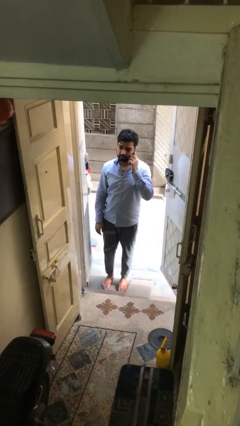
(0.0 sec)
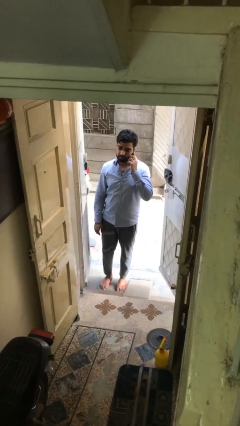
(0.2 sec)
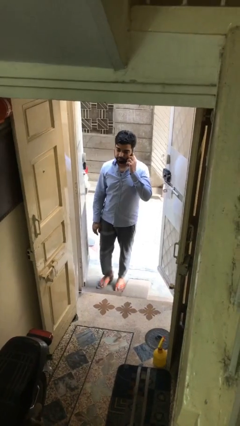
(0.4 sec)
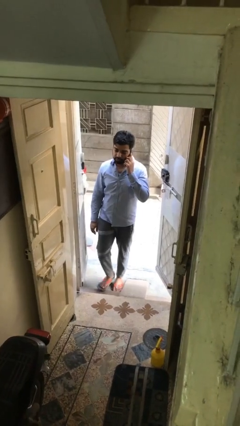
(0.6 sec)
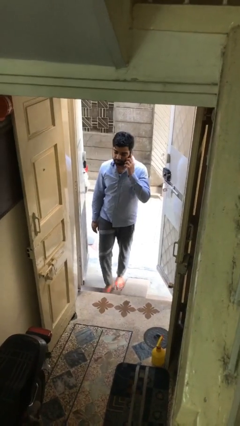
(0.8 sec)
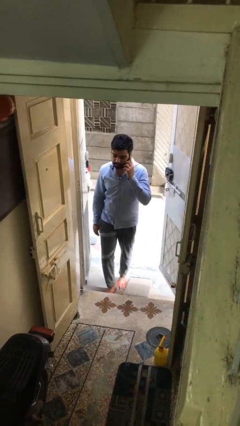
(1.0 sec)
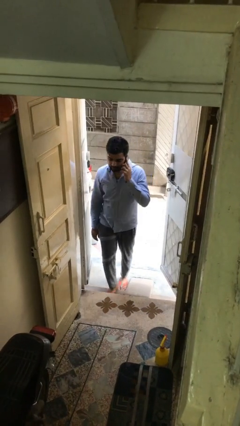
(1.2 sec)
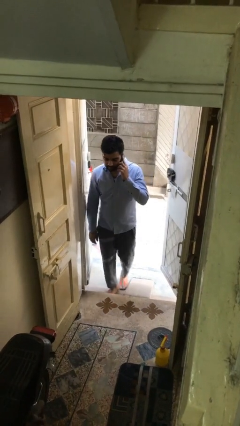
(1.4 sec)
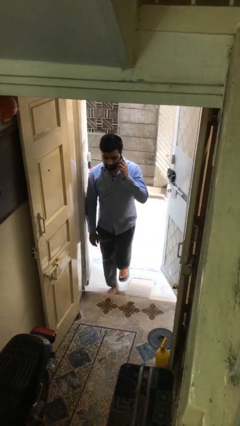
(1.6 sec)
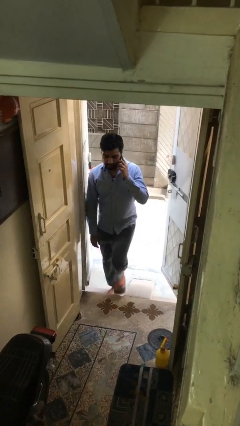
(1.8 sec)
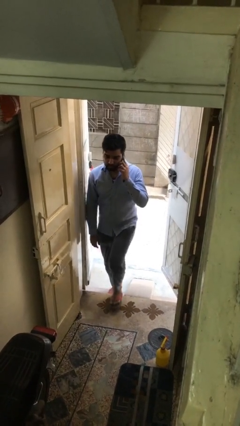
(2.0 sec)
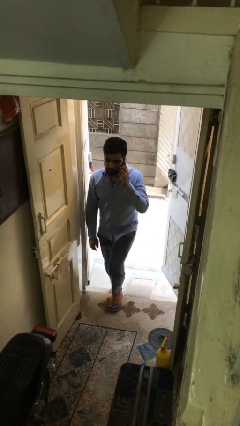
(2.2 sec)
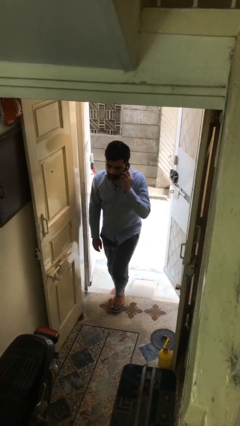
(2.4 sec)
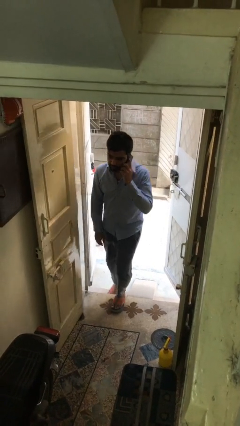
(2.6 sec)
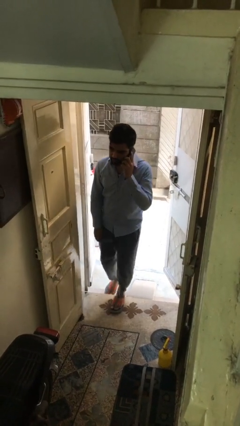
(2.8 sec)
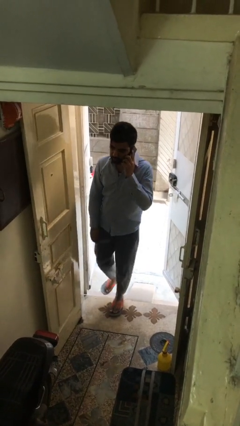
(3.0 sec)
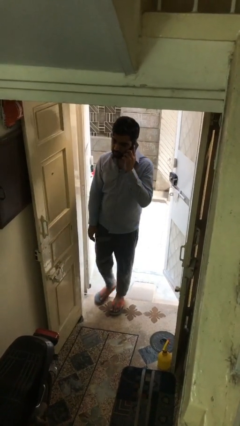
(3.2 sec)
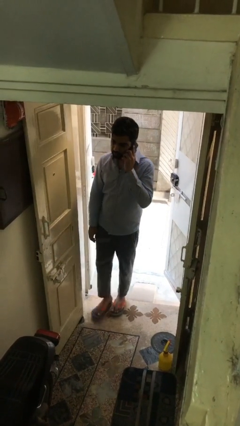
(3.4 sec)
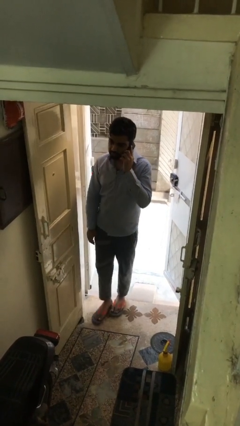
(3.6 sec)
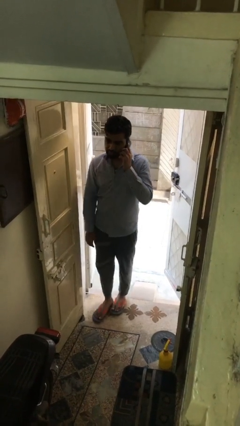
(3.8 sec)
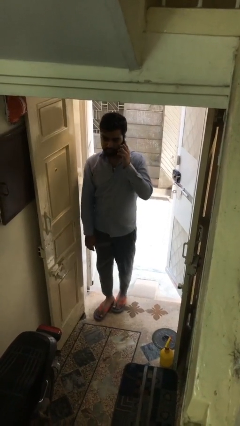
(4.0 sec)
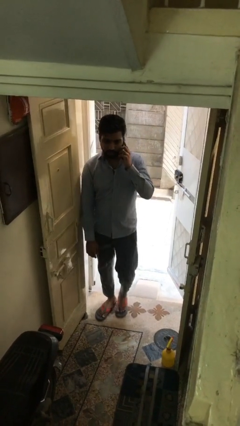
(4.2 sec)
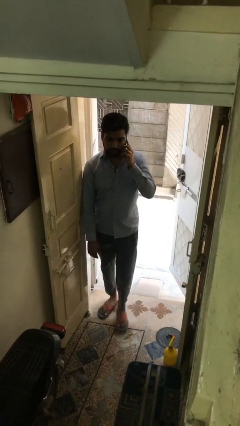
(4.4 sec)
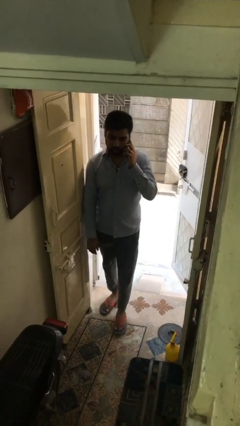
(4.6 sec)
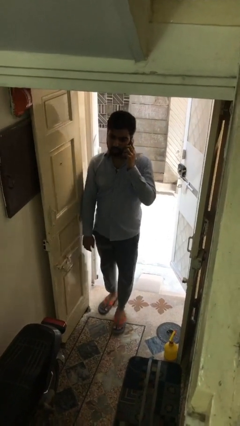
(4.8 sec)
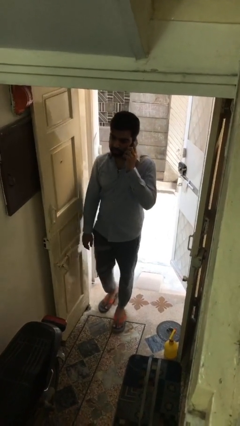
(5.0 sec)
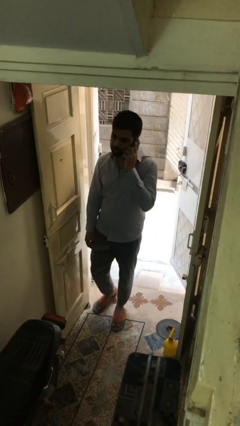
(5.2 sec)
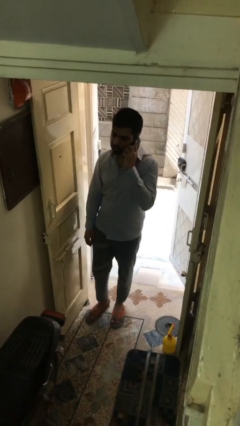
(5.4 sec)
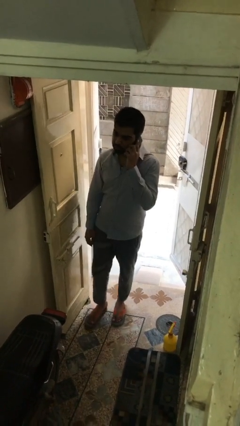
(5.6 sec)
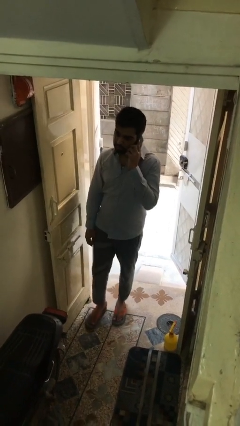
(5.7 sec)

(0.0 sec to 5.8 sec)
person enters scene through structure

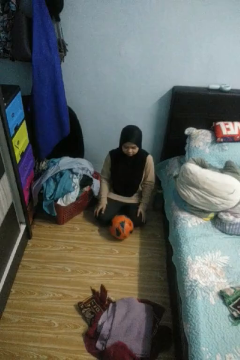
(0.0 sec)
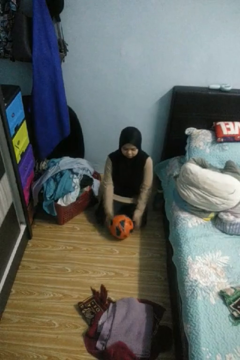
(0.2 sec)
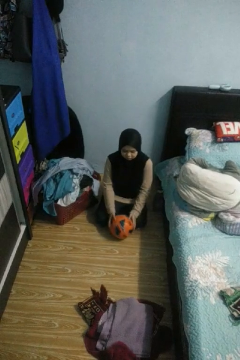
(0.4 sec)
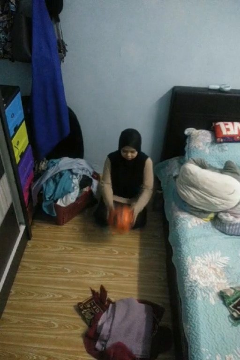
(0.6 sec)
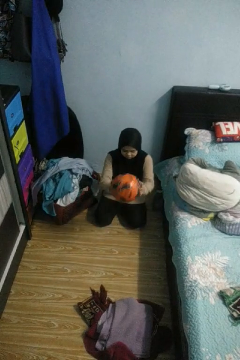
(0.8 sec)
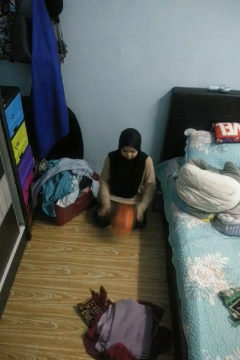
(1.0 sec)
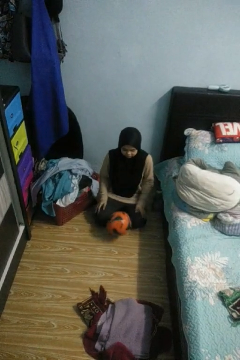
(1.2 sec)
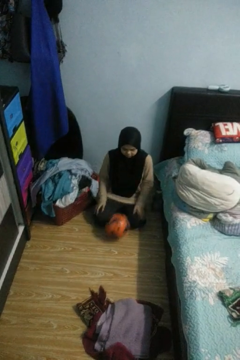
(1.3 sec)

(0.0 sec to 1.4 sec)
person bounces ball on floor

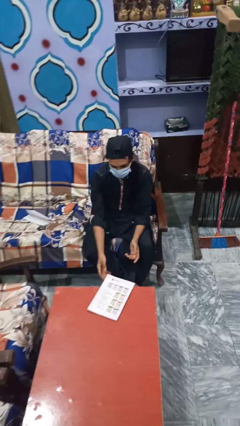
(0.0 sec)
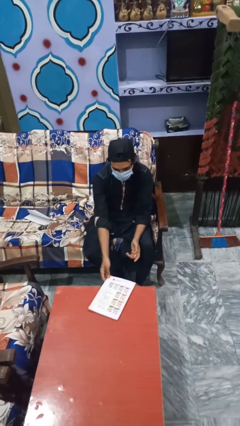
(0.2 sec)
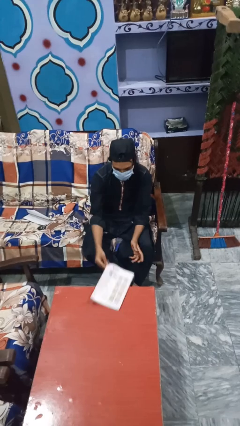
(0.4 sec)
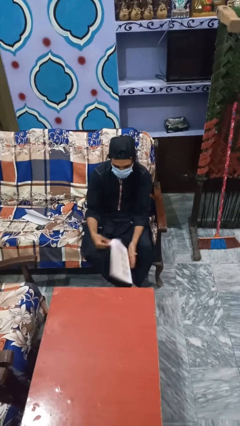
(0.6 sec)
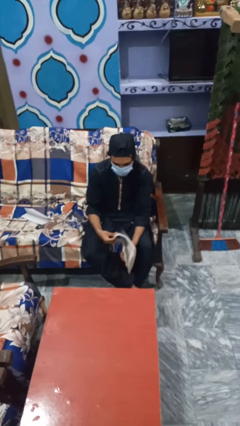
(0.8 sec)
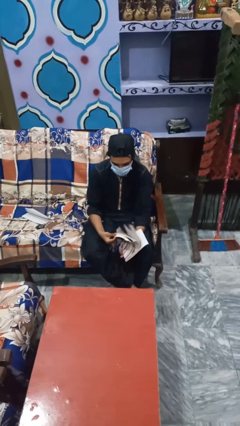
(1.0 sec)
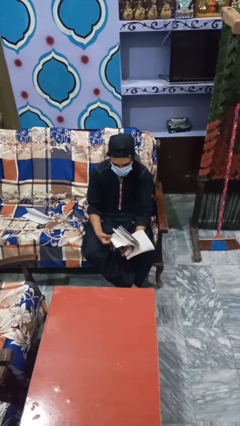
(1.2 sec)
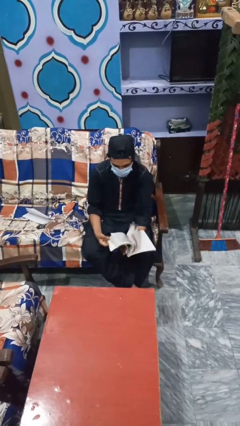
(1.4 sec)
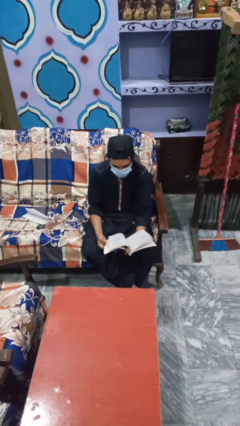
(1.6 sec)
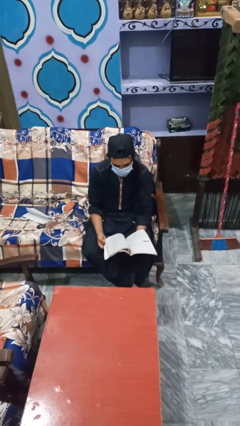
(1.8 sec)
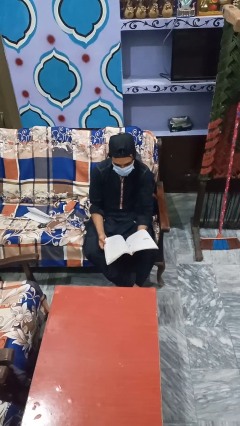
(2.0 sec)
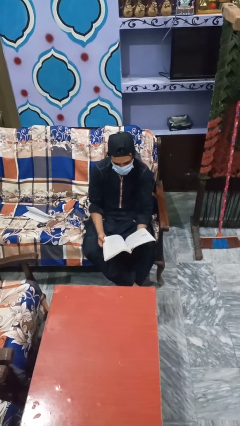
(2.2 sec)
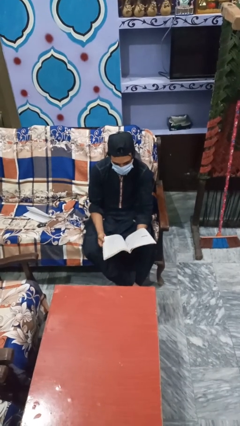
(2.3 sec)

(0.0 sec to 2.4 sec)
person reads magazine

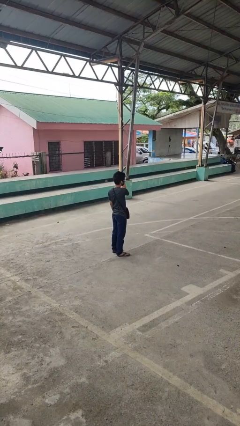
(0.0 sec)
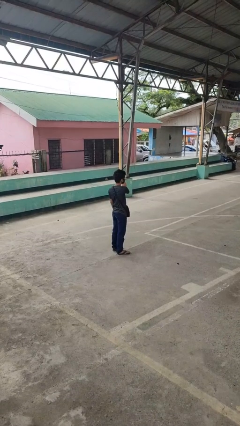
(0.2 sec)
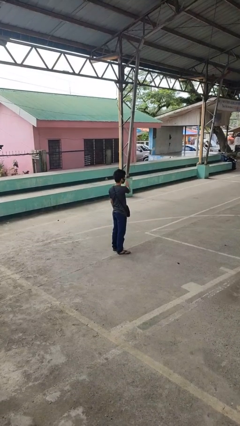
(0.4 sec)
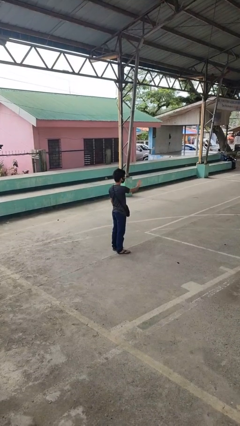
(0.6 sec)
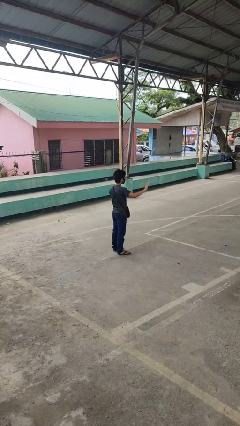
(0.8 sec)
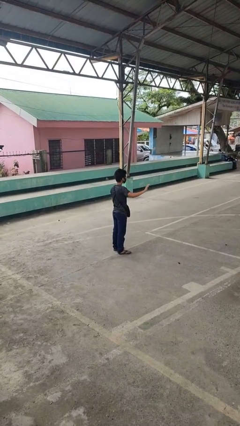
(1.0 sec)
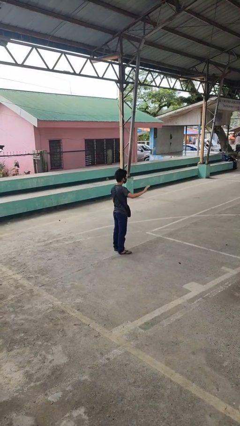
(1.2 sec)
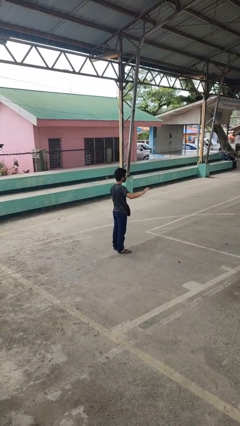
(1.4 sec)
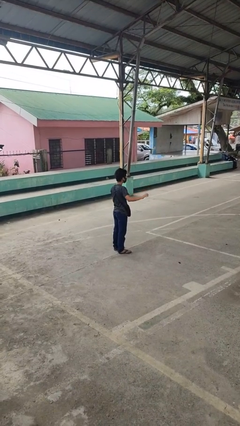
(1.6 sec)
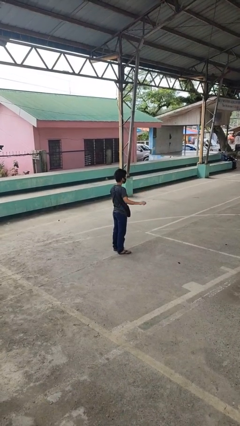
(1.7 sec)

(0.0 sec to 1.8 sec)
person gestures swipe right

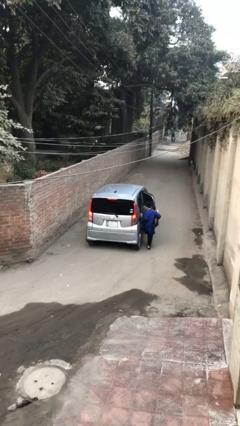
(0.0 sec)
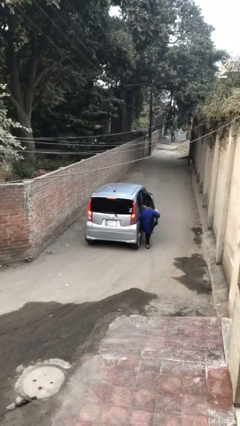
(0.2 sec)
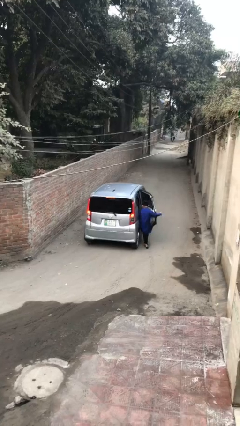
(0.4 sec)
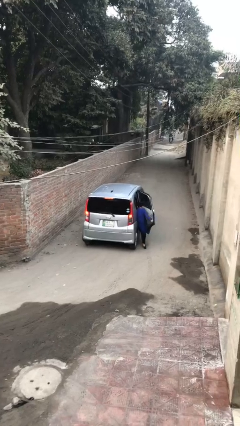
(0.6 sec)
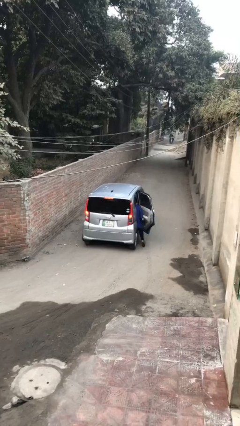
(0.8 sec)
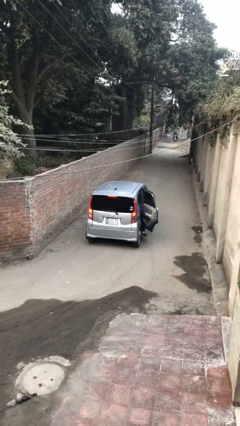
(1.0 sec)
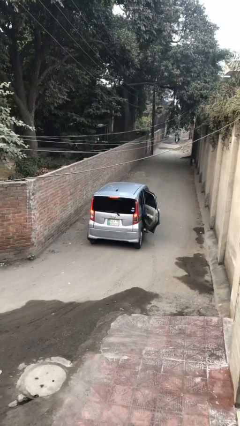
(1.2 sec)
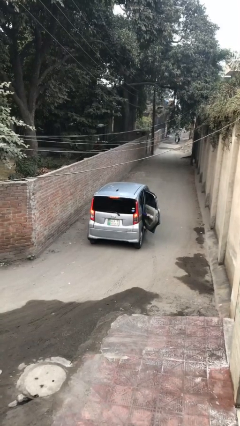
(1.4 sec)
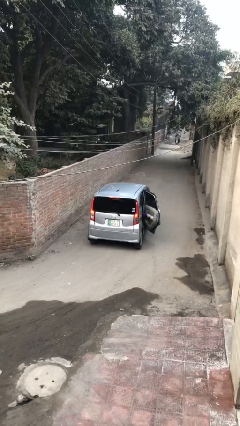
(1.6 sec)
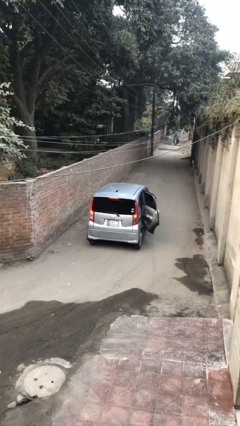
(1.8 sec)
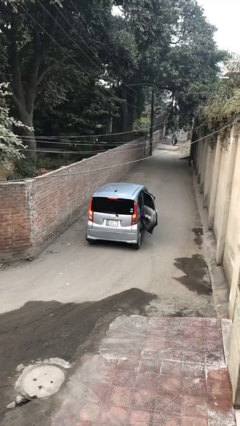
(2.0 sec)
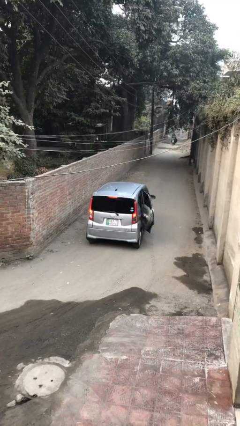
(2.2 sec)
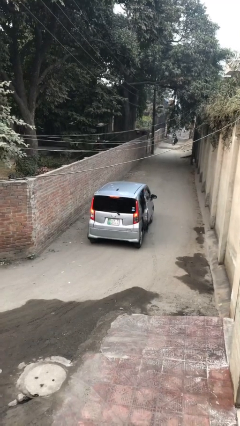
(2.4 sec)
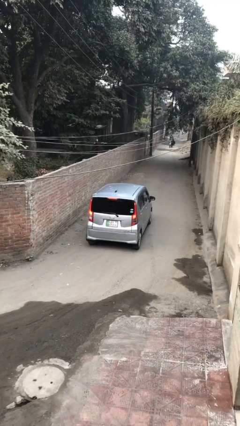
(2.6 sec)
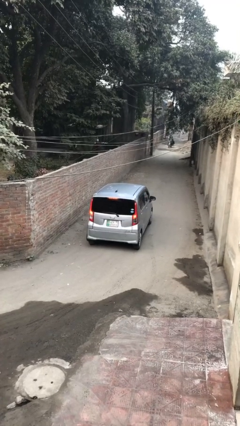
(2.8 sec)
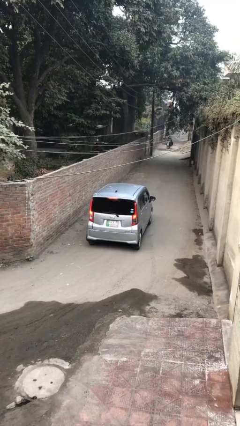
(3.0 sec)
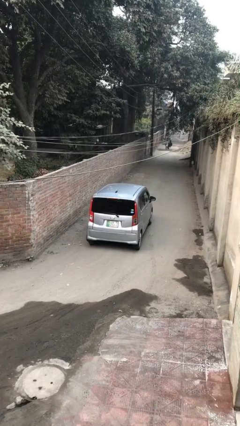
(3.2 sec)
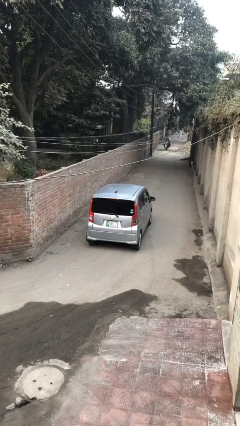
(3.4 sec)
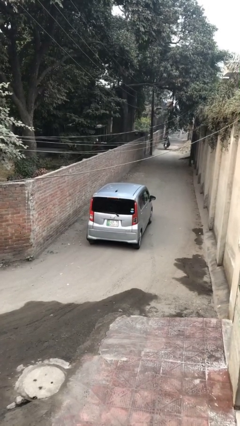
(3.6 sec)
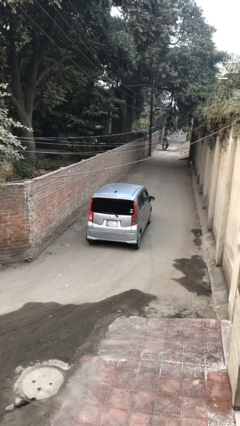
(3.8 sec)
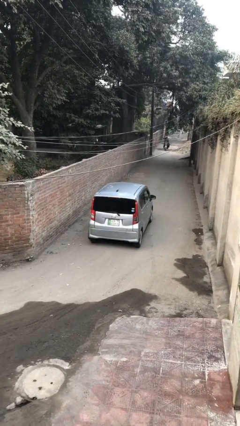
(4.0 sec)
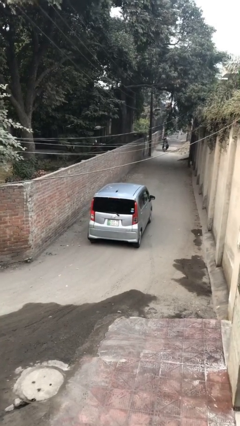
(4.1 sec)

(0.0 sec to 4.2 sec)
car picks up person

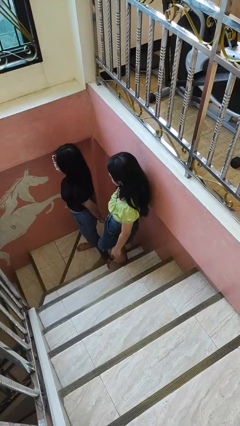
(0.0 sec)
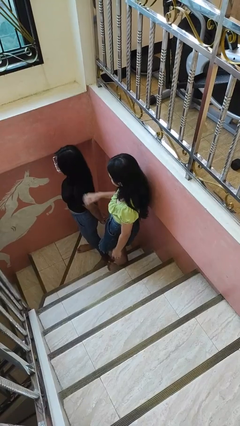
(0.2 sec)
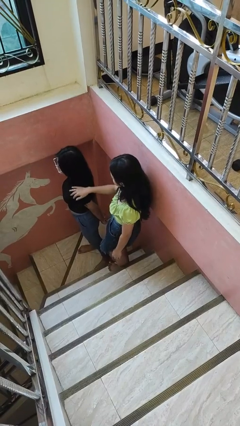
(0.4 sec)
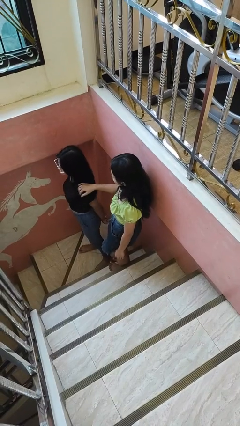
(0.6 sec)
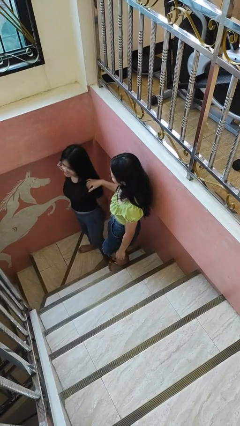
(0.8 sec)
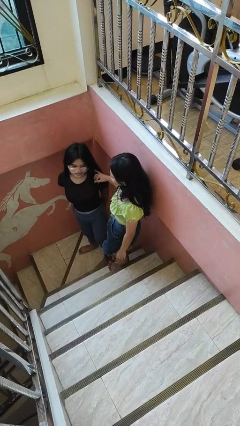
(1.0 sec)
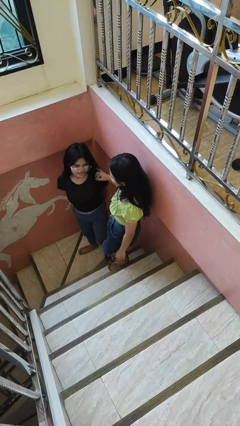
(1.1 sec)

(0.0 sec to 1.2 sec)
person grabs person by shoulder

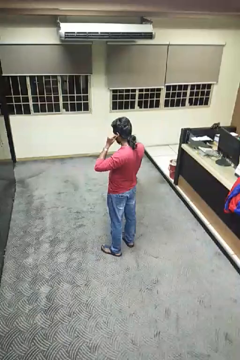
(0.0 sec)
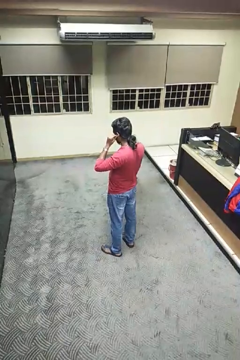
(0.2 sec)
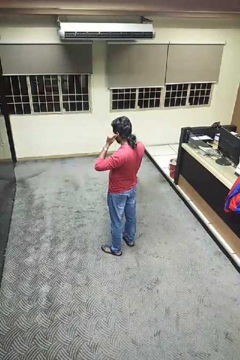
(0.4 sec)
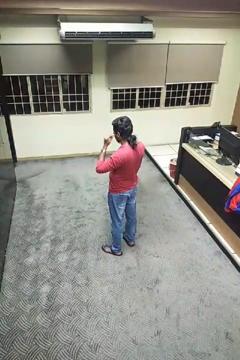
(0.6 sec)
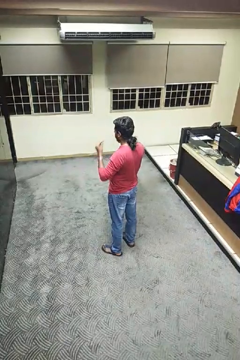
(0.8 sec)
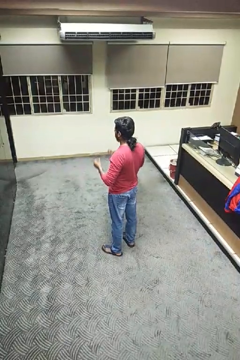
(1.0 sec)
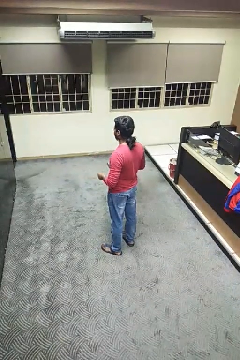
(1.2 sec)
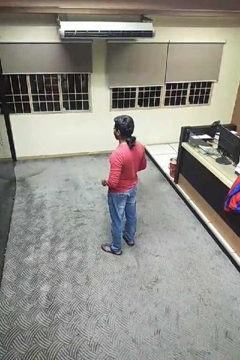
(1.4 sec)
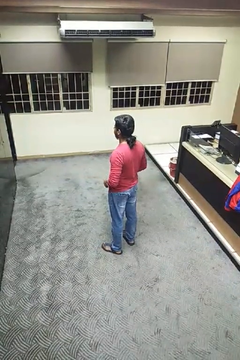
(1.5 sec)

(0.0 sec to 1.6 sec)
person takes off headphones
